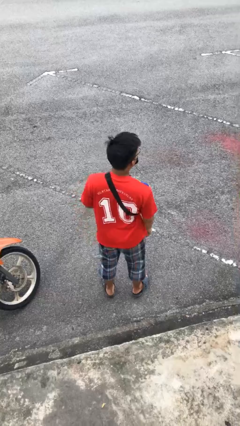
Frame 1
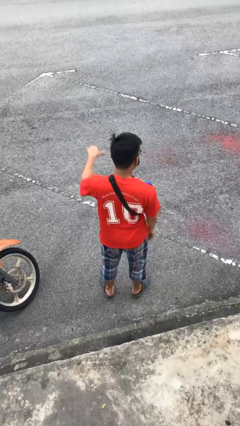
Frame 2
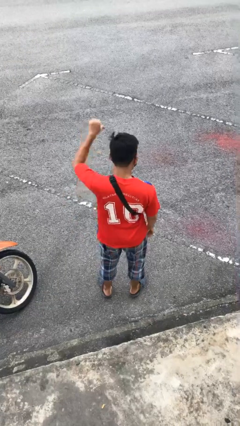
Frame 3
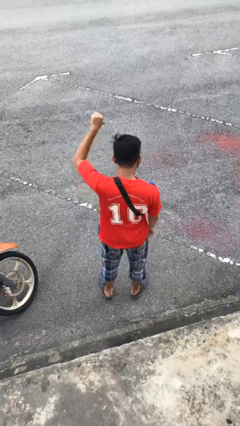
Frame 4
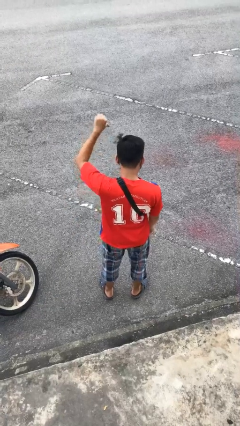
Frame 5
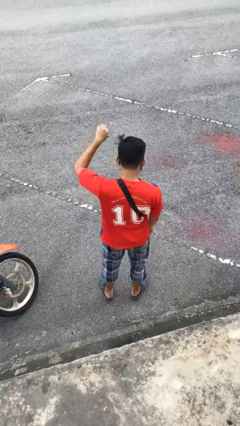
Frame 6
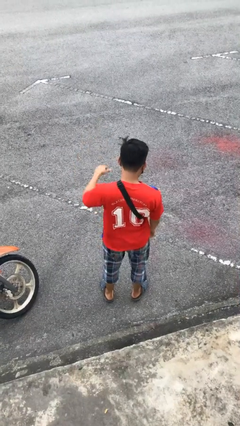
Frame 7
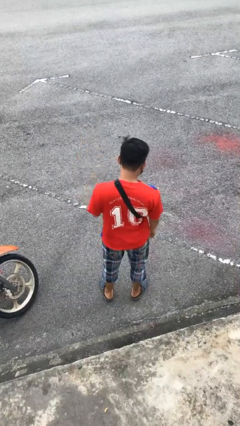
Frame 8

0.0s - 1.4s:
person gestures thumbs down

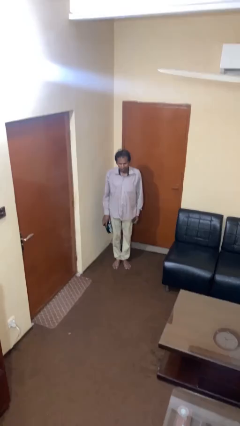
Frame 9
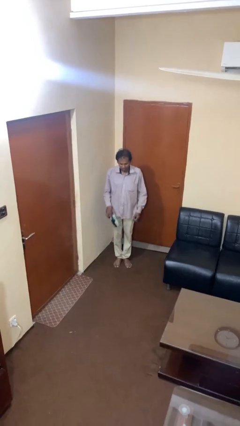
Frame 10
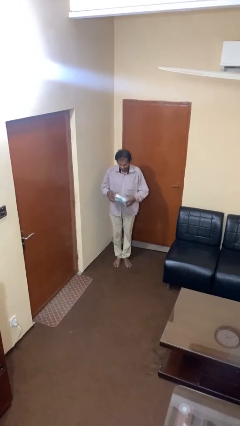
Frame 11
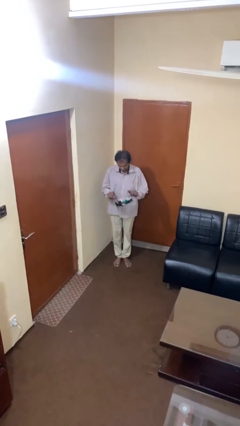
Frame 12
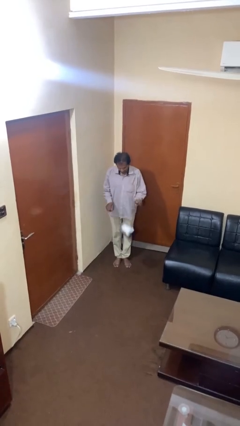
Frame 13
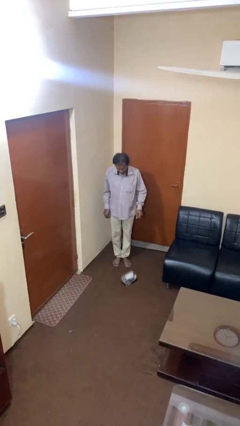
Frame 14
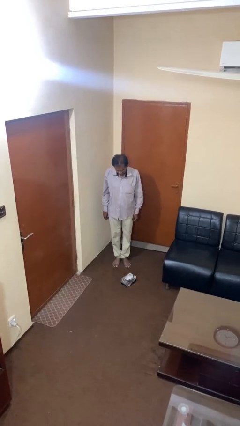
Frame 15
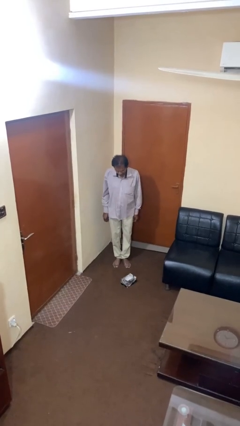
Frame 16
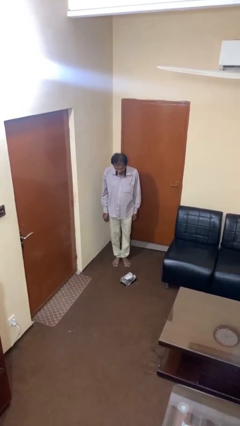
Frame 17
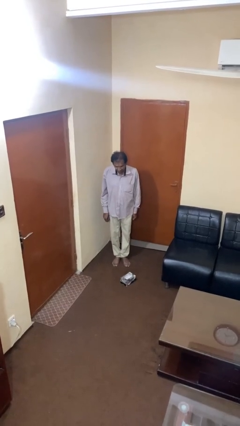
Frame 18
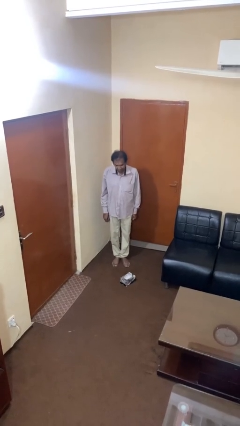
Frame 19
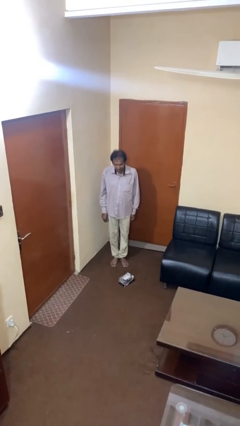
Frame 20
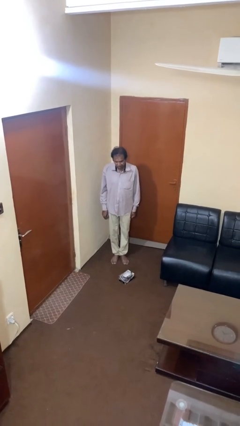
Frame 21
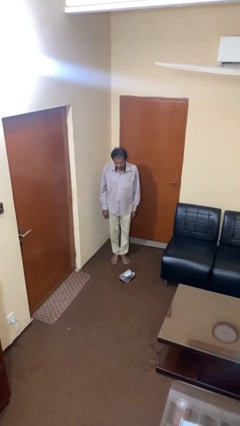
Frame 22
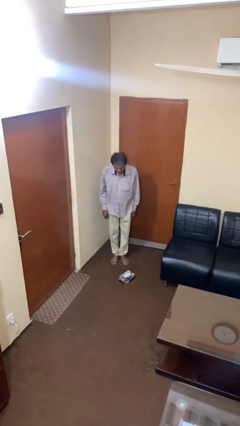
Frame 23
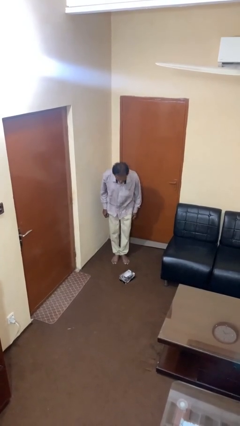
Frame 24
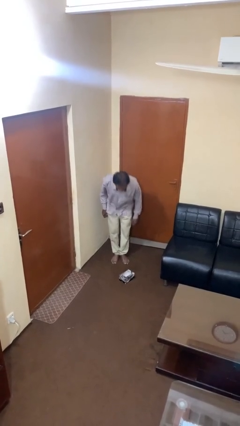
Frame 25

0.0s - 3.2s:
person drops object

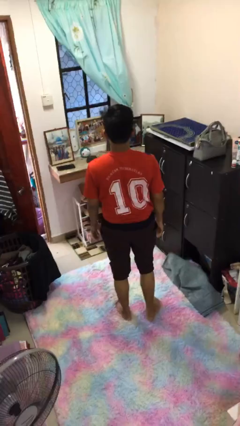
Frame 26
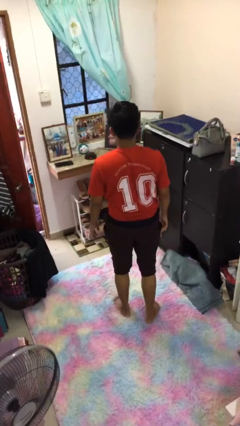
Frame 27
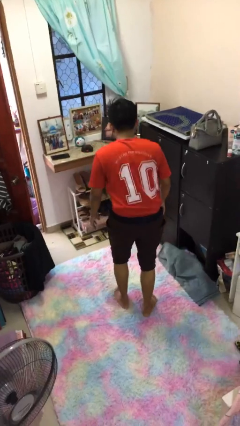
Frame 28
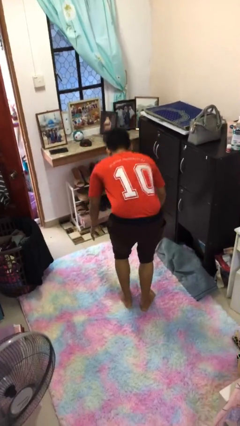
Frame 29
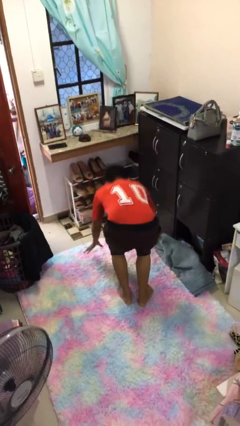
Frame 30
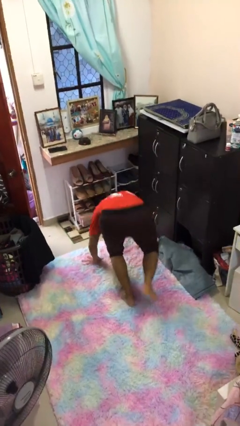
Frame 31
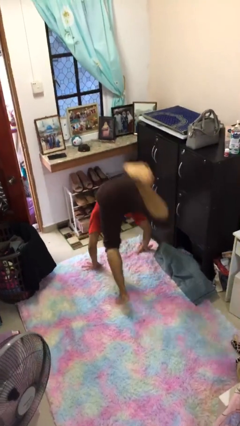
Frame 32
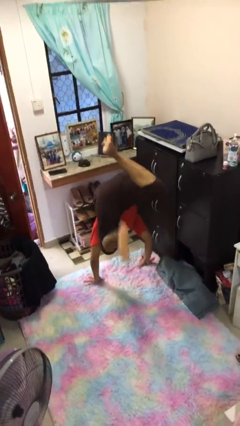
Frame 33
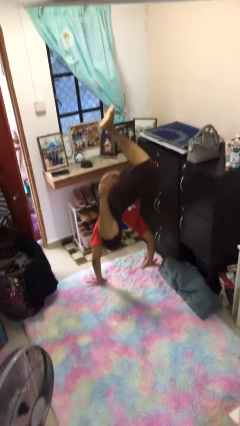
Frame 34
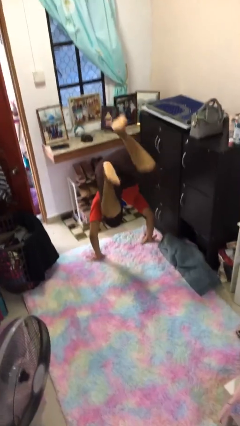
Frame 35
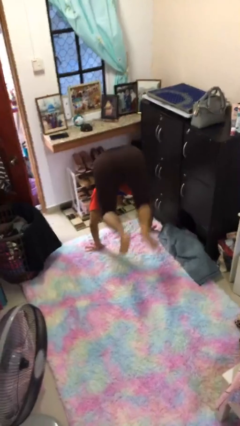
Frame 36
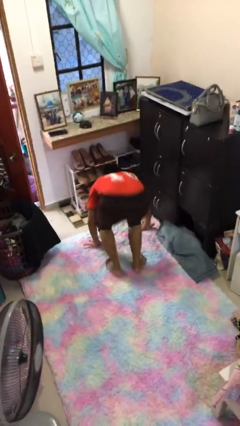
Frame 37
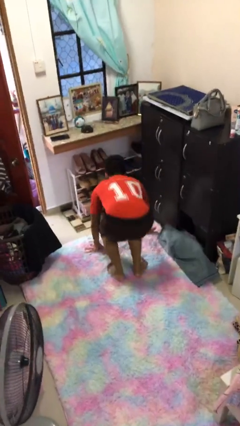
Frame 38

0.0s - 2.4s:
person handstand

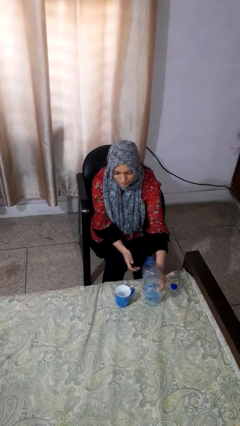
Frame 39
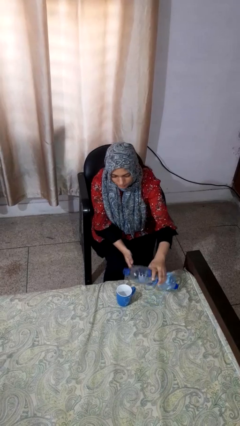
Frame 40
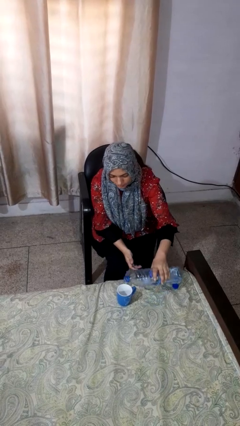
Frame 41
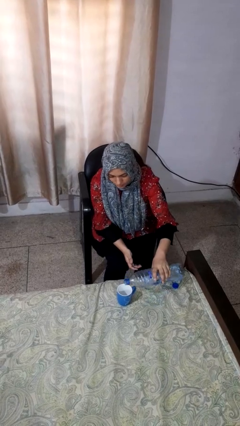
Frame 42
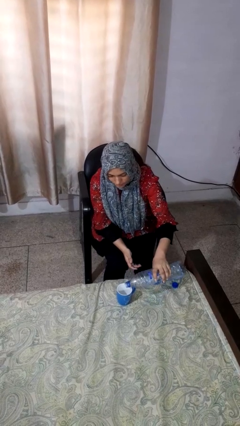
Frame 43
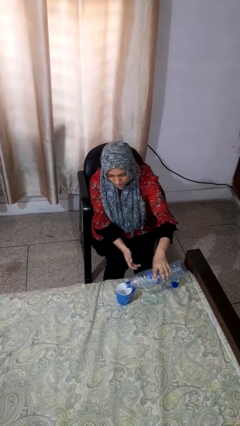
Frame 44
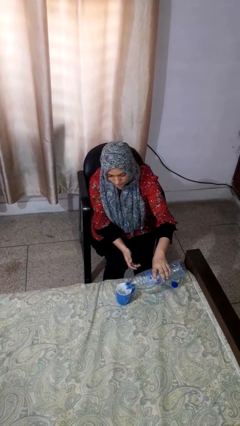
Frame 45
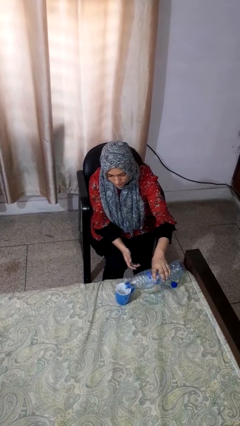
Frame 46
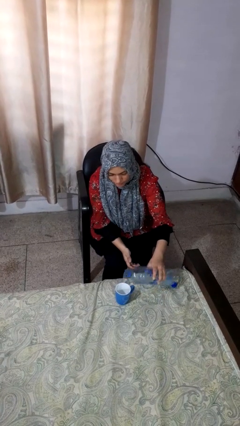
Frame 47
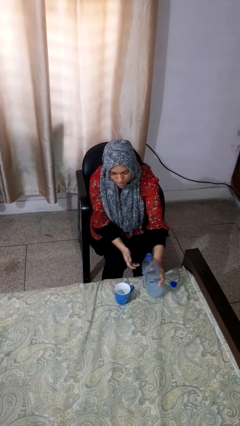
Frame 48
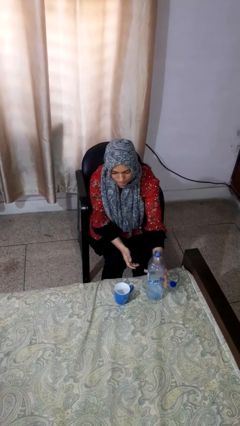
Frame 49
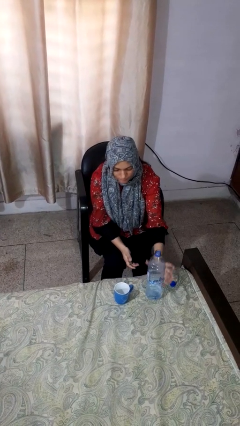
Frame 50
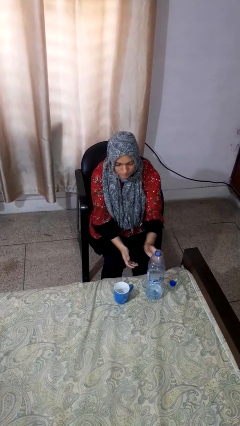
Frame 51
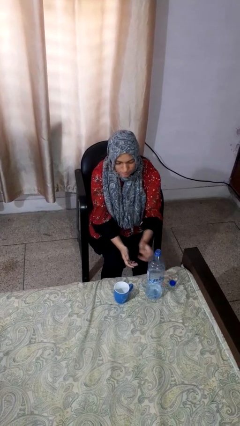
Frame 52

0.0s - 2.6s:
person pours liquid into cup

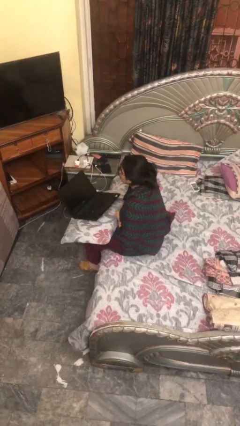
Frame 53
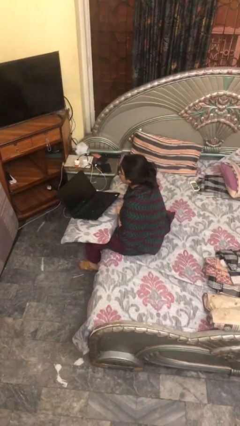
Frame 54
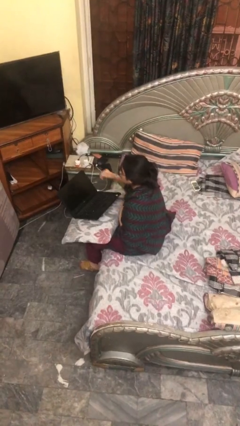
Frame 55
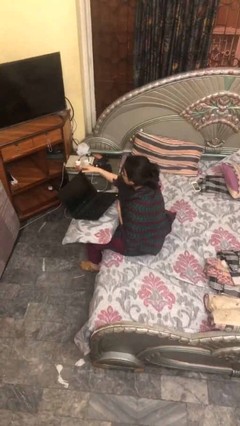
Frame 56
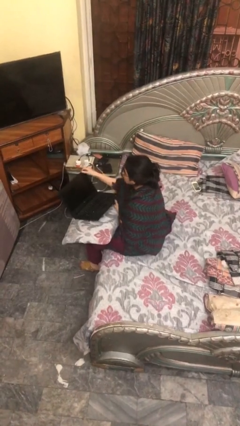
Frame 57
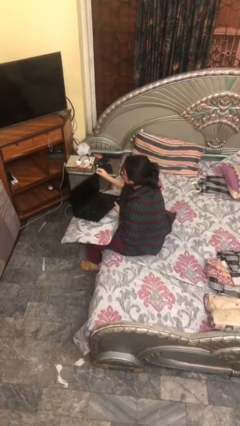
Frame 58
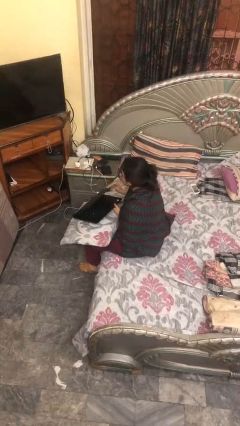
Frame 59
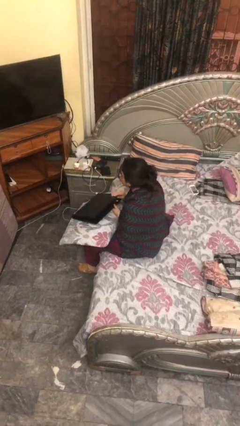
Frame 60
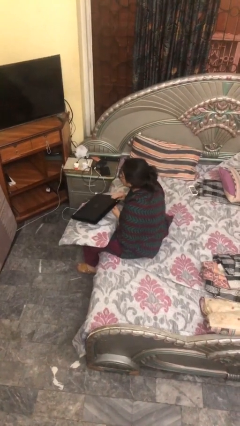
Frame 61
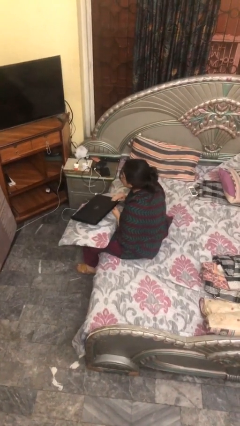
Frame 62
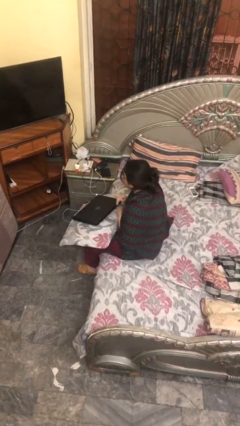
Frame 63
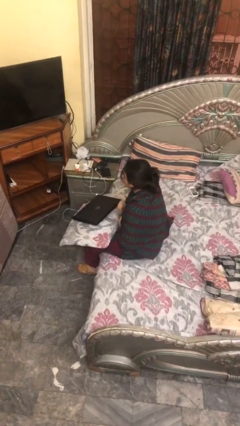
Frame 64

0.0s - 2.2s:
person closes laptop

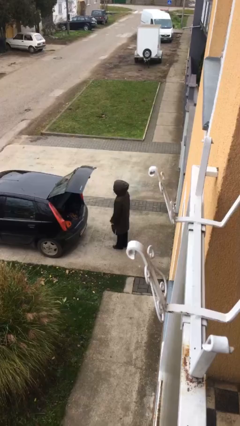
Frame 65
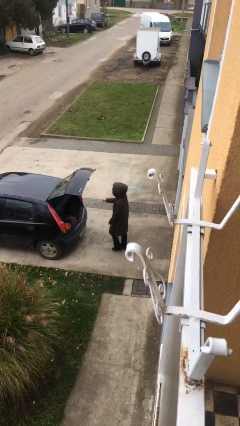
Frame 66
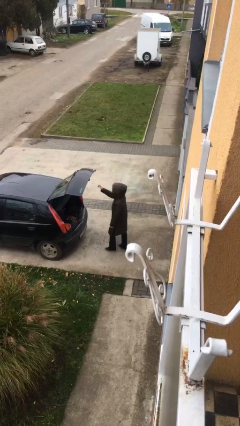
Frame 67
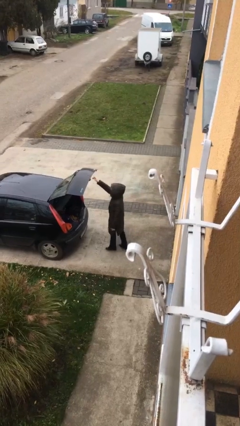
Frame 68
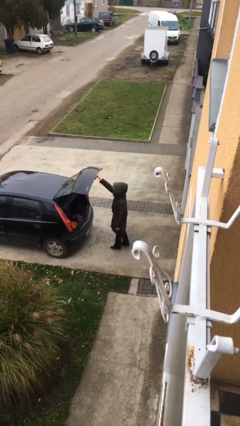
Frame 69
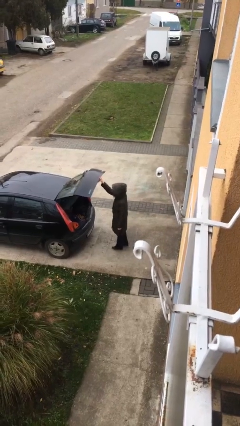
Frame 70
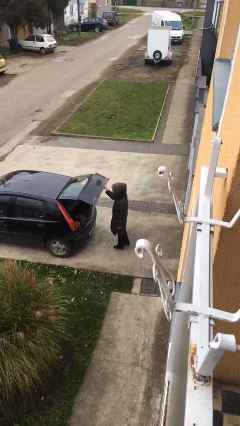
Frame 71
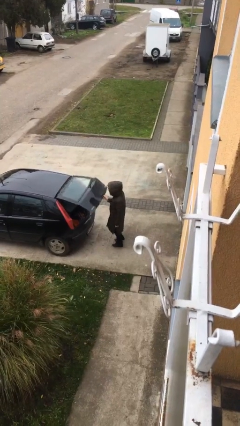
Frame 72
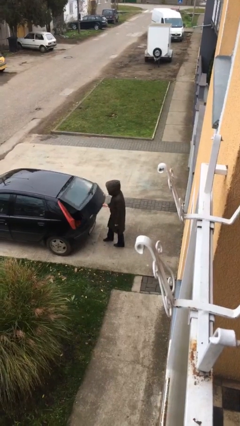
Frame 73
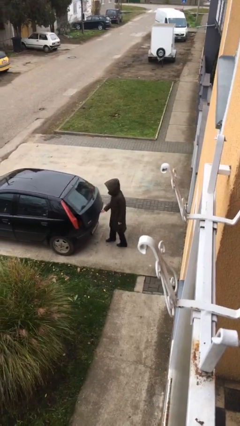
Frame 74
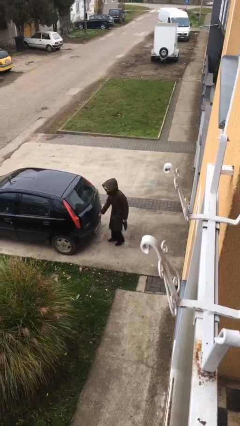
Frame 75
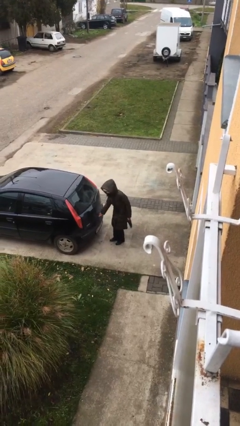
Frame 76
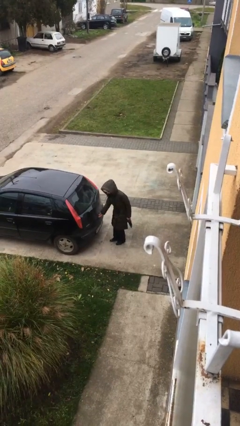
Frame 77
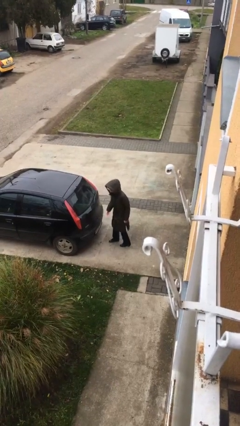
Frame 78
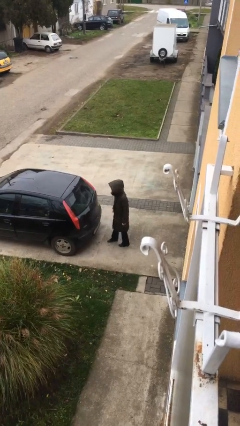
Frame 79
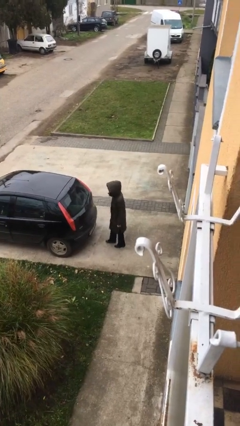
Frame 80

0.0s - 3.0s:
person closes car trunk

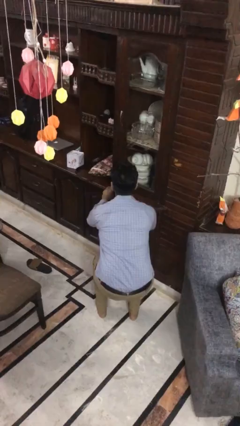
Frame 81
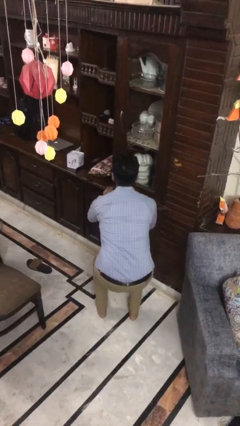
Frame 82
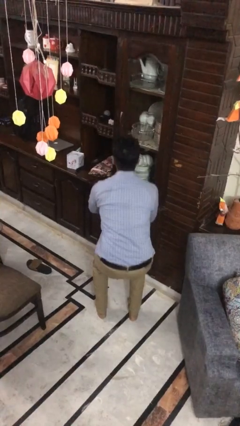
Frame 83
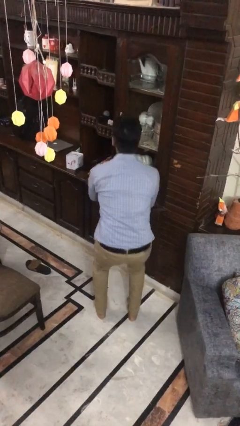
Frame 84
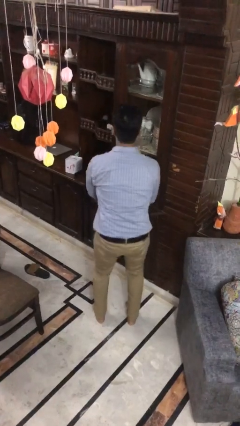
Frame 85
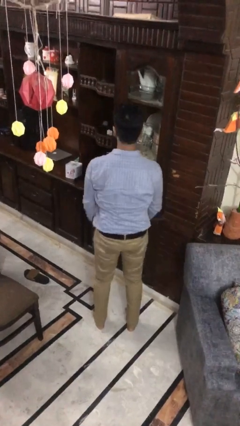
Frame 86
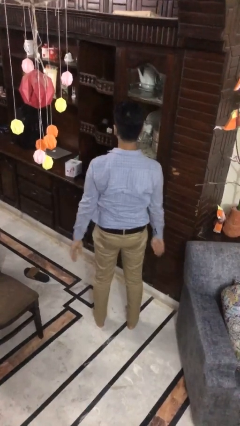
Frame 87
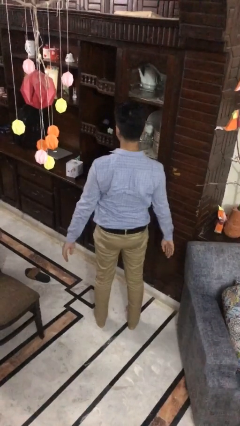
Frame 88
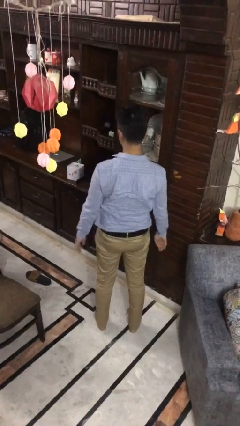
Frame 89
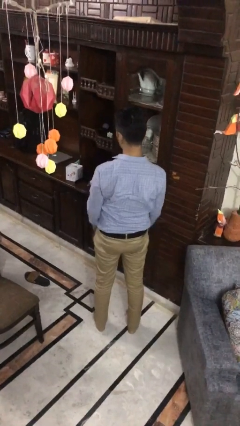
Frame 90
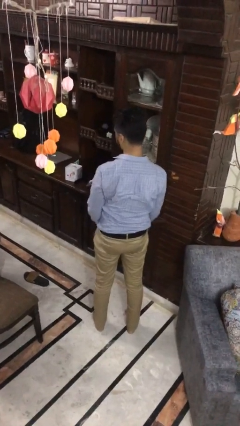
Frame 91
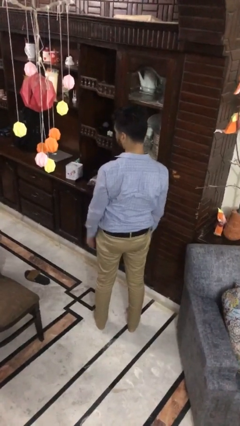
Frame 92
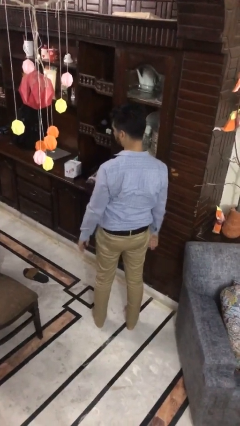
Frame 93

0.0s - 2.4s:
person stands up
